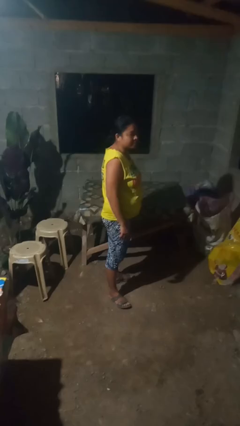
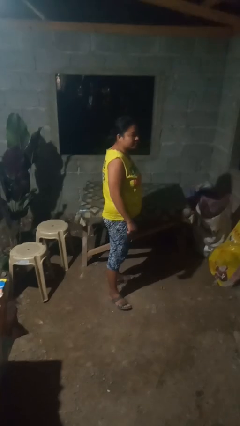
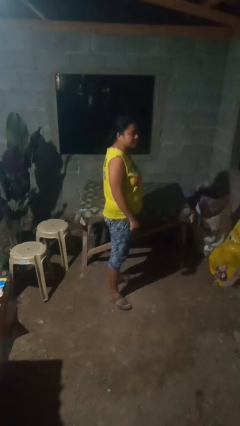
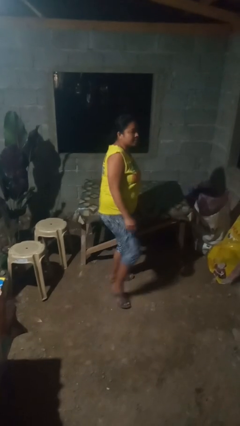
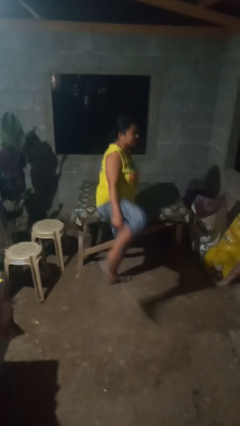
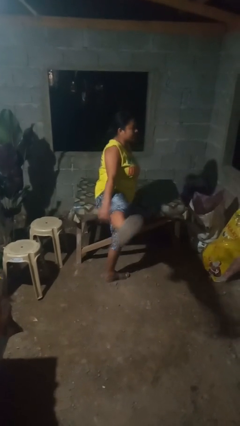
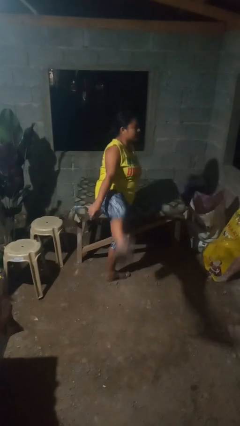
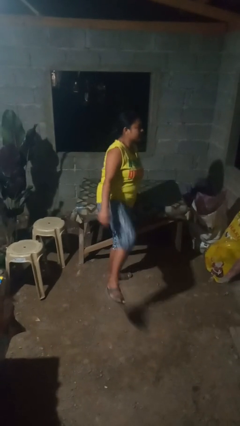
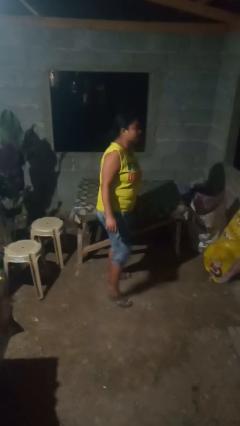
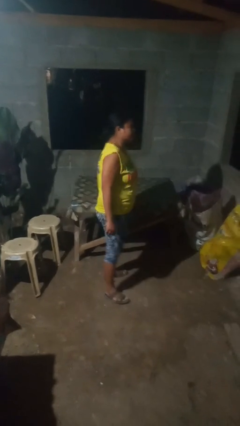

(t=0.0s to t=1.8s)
person karate kicks

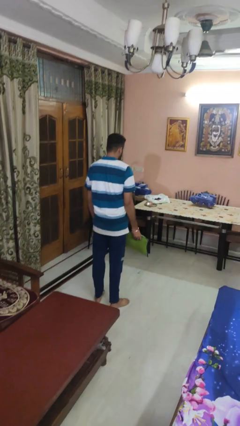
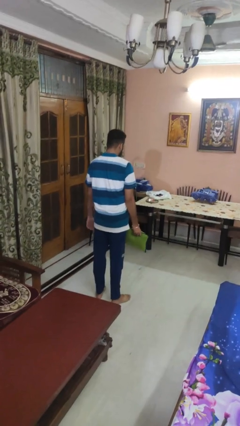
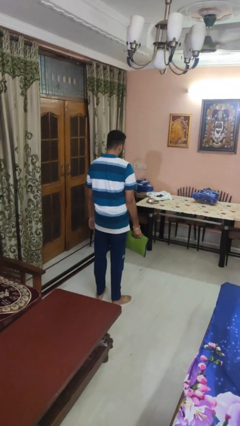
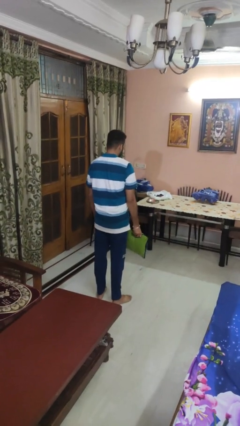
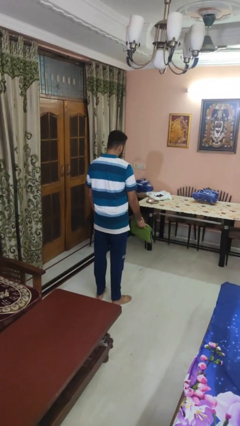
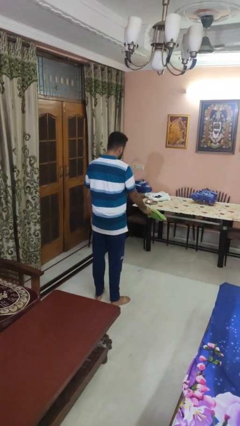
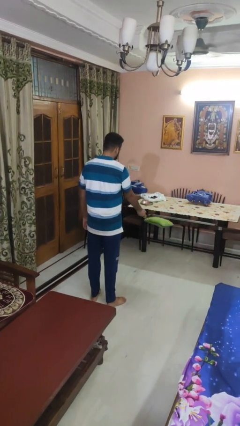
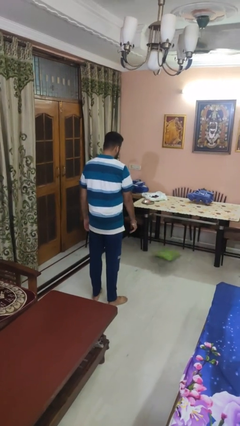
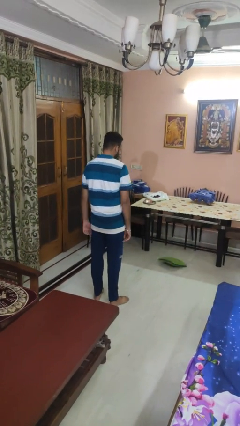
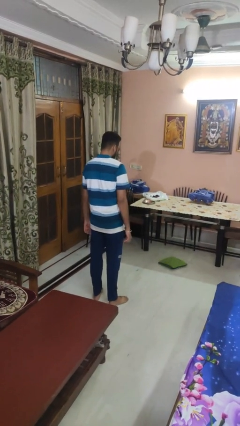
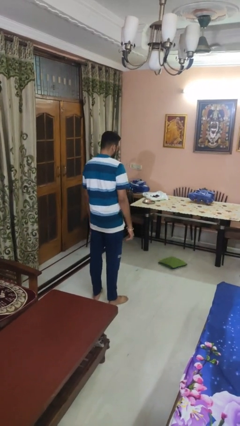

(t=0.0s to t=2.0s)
person throws object to ground

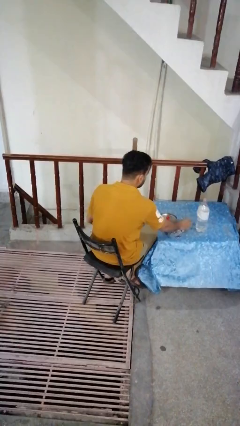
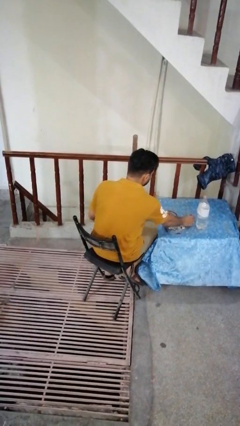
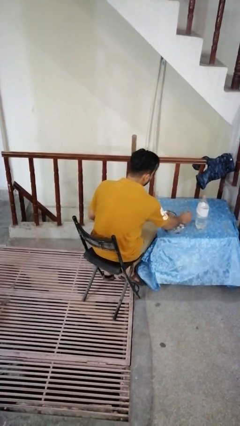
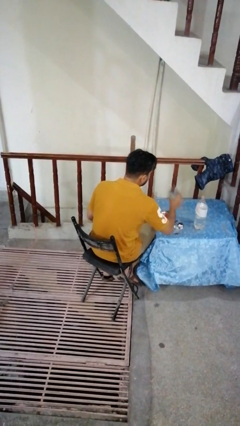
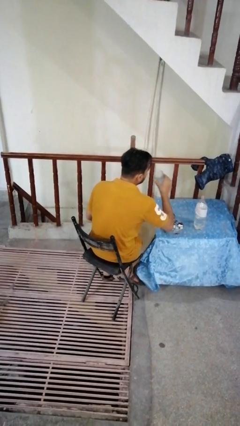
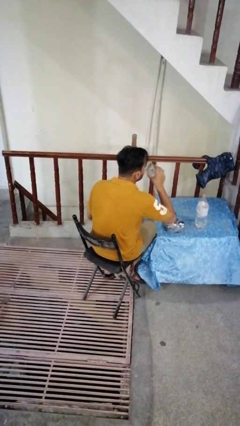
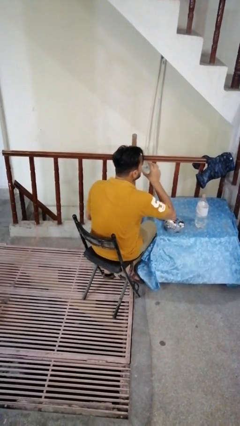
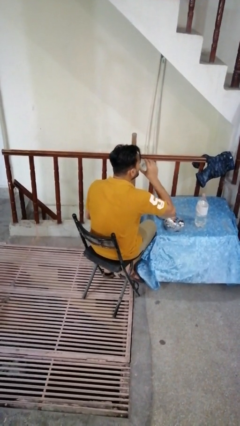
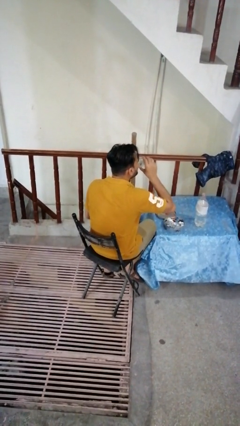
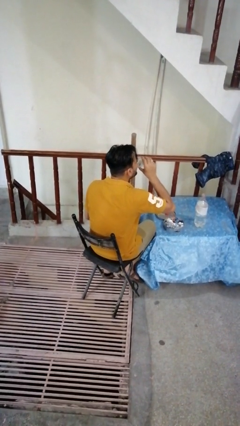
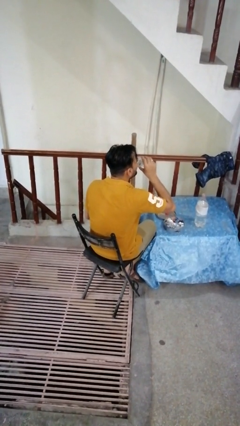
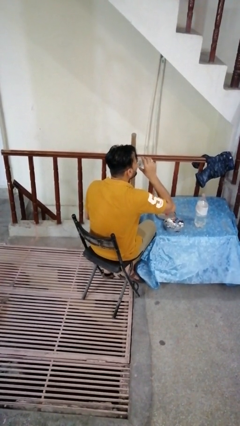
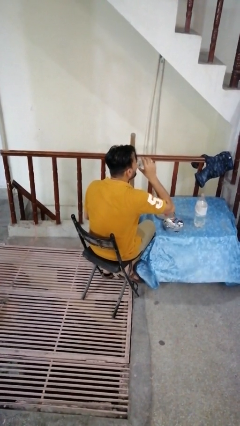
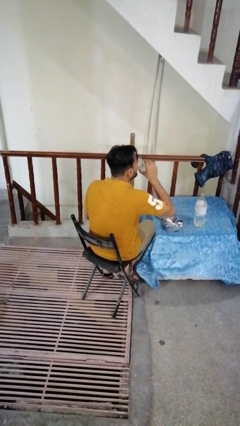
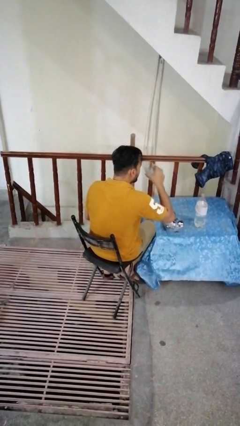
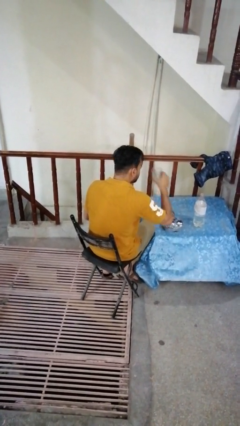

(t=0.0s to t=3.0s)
person drinks from cup

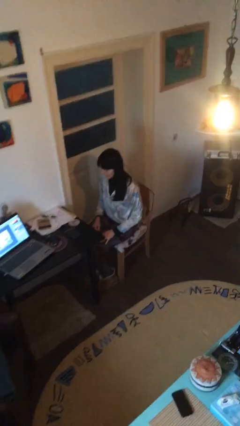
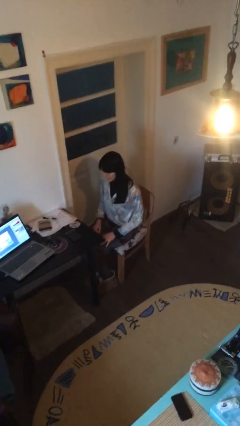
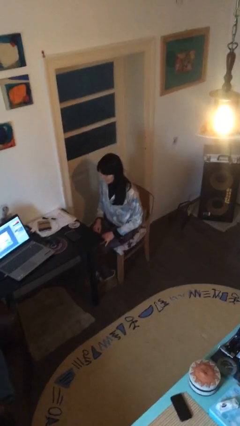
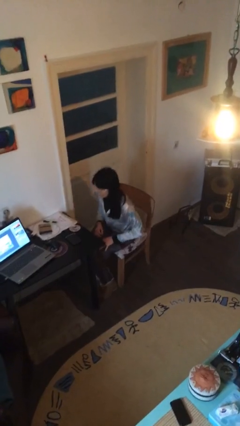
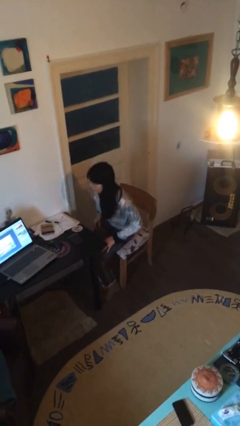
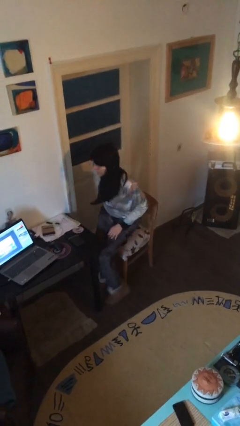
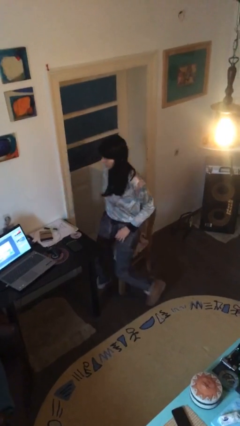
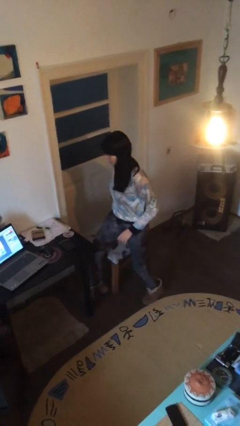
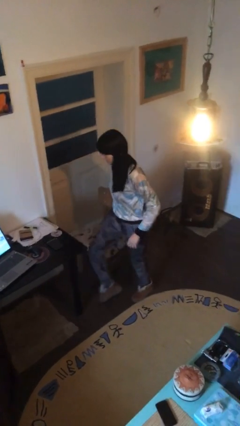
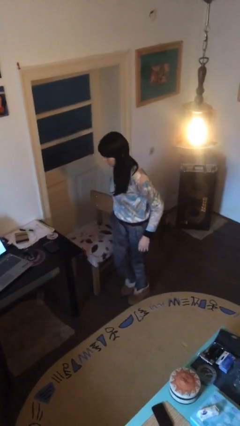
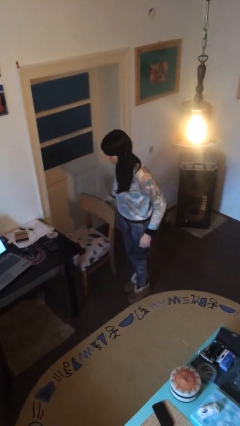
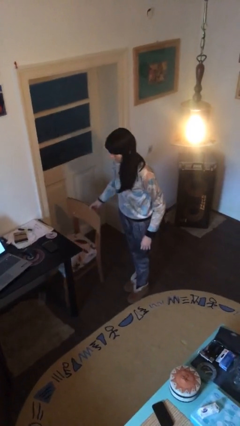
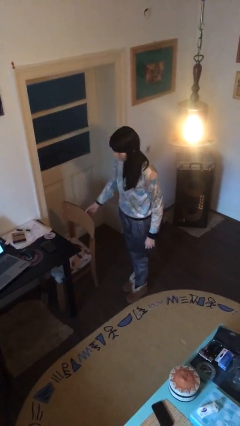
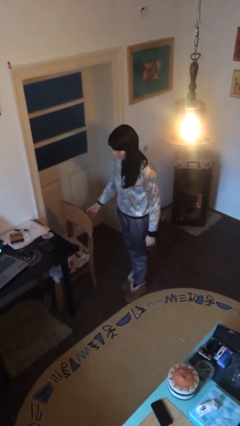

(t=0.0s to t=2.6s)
person stands up

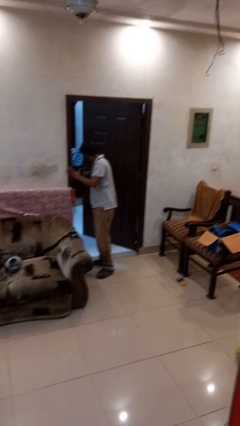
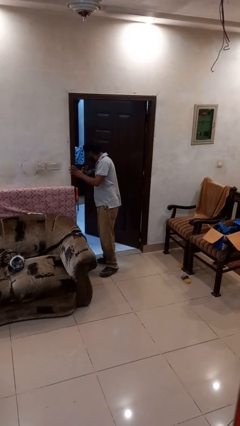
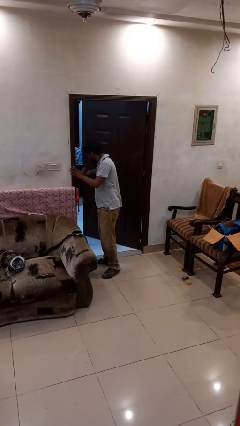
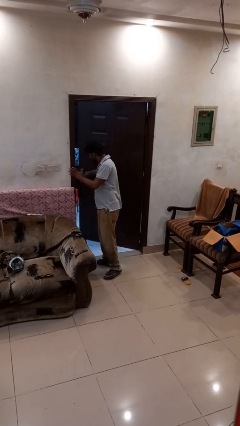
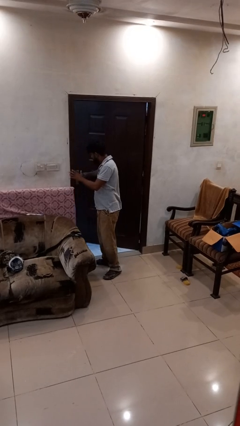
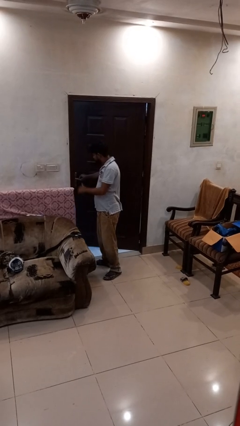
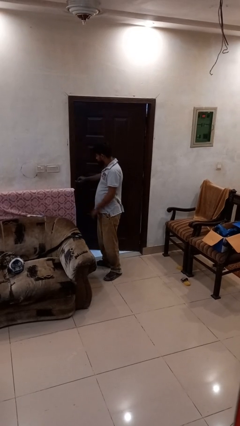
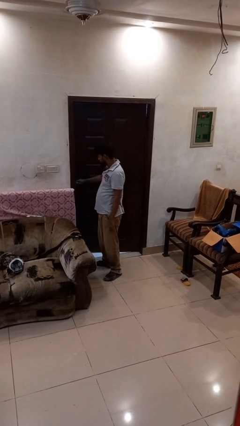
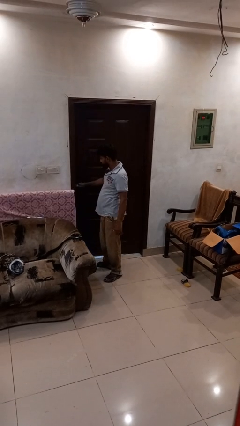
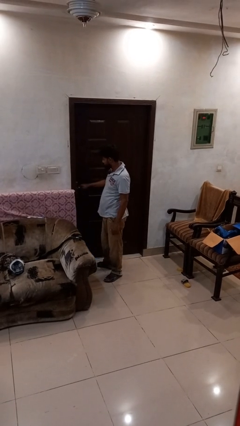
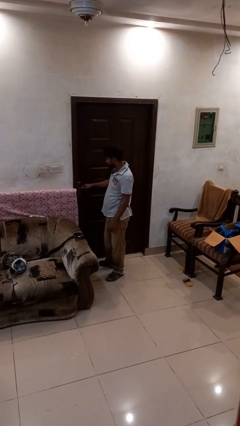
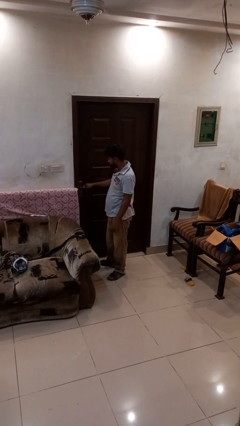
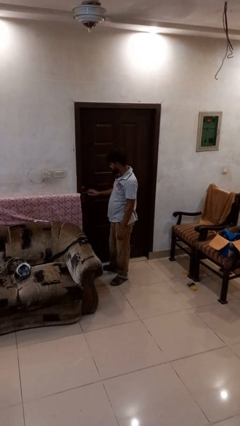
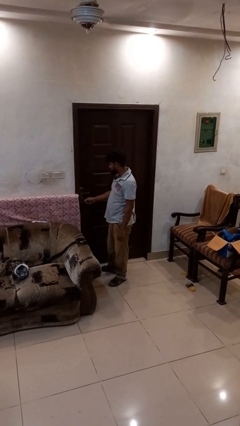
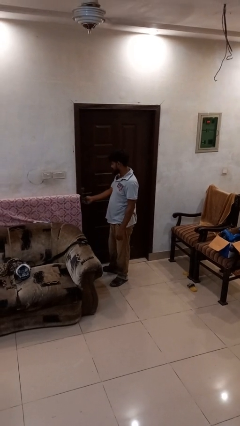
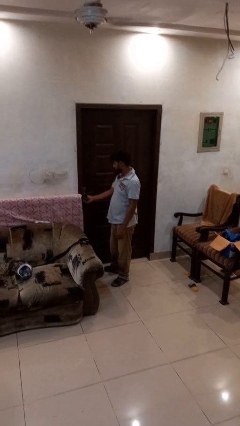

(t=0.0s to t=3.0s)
person closes facility door

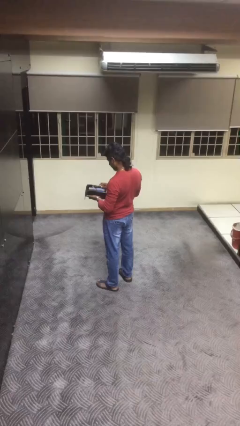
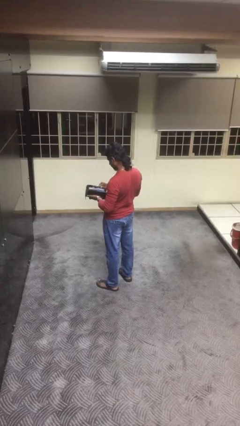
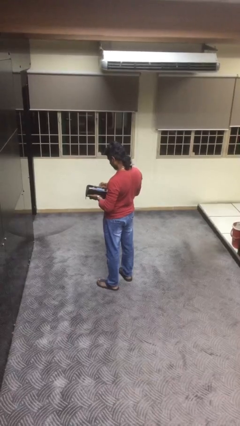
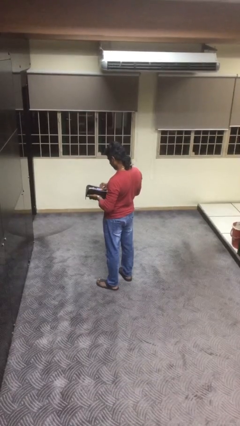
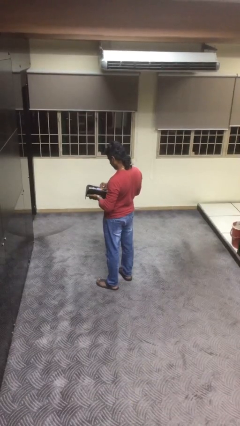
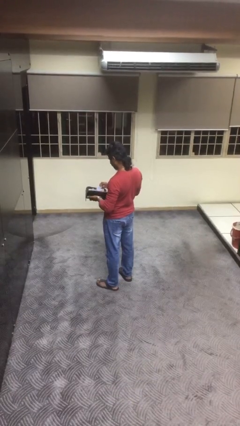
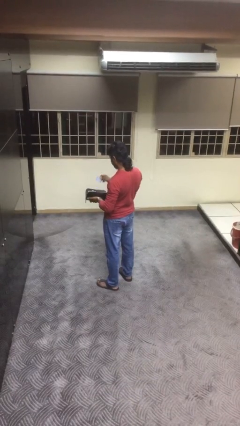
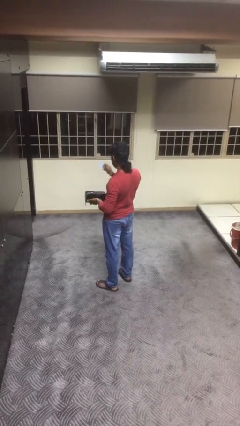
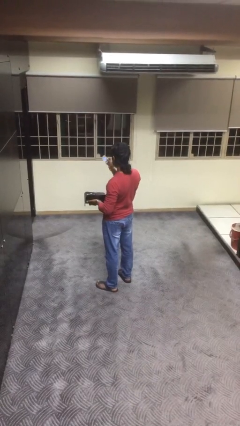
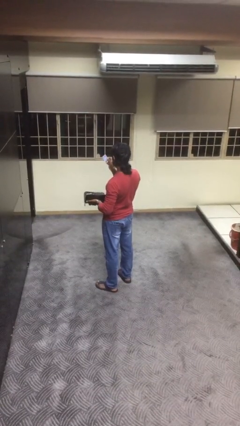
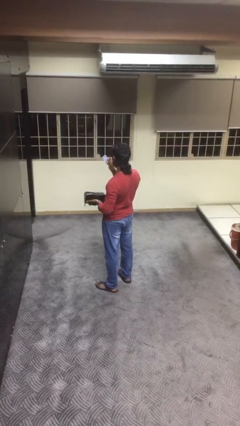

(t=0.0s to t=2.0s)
person takes object from purse

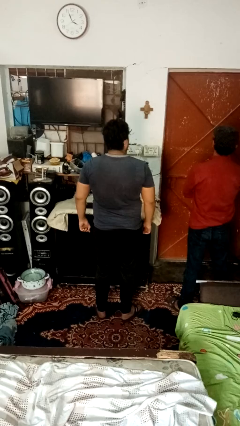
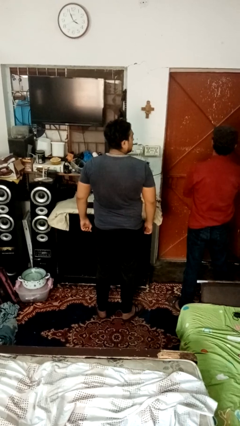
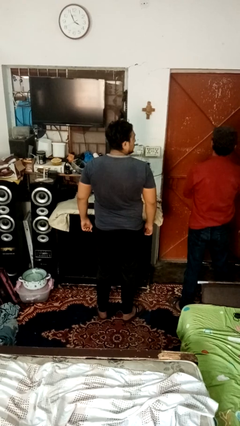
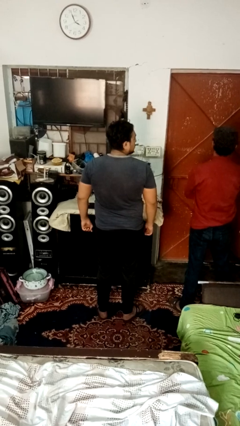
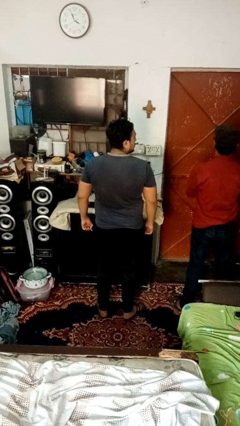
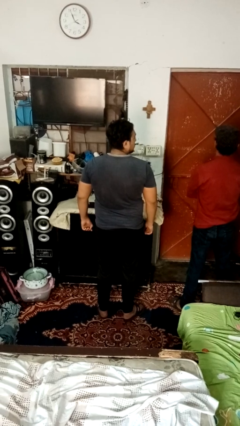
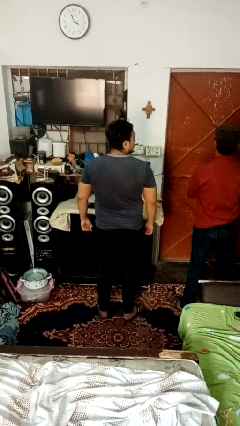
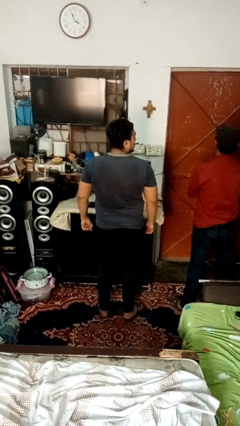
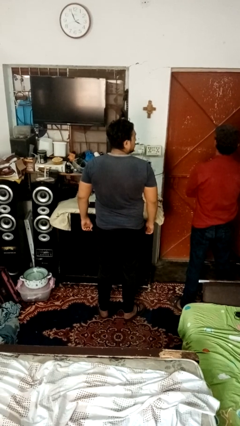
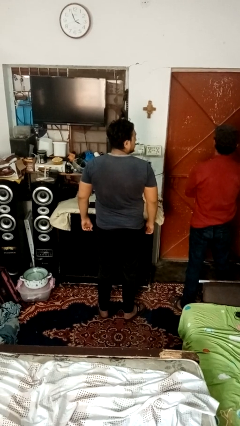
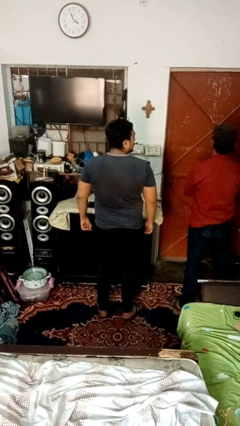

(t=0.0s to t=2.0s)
person looks over shoulder

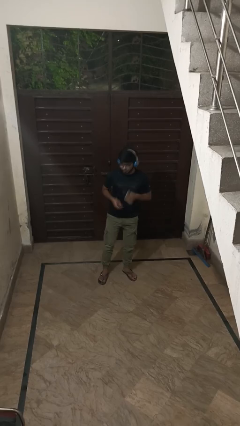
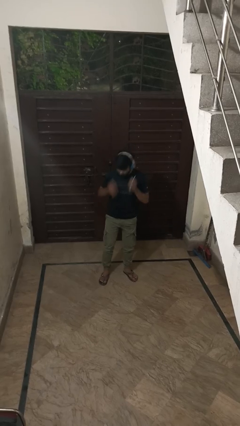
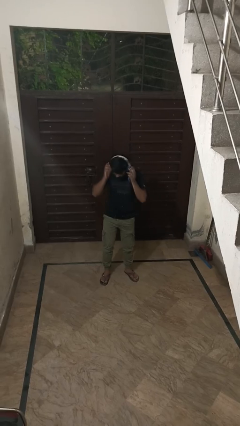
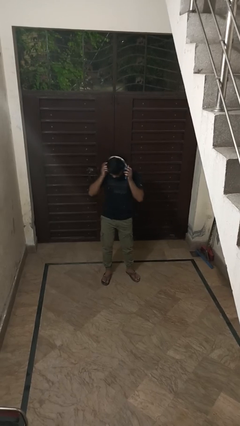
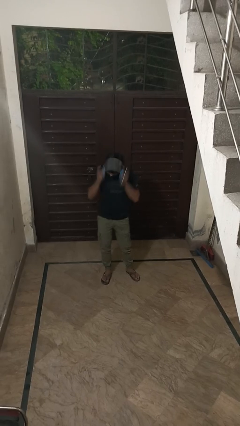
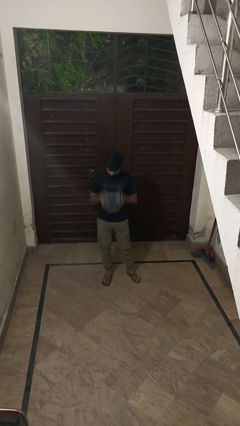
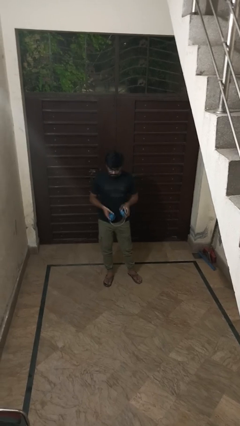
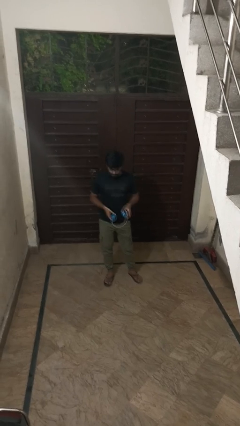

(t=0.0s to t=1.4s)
person takes off headphones
